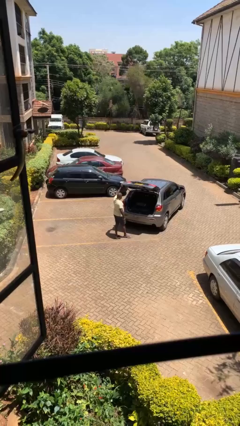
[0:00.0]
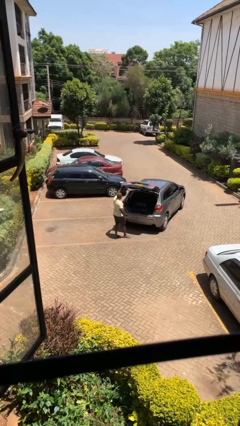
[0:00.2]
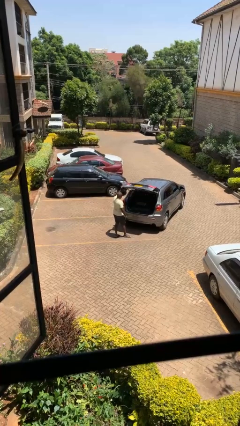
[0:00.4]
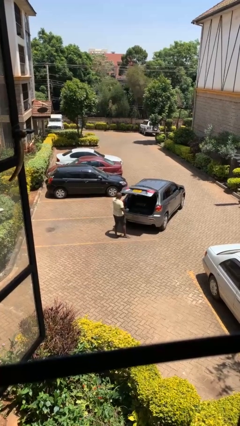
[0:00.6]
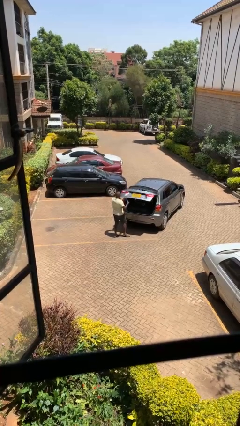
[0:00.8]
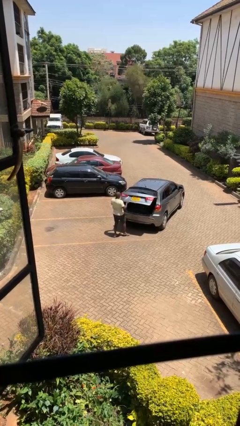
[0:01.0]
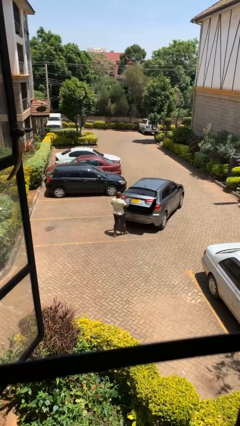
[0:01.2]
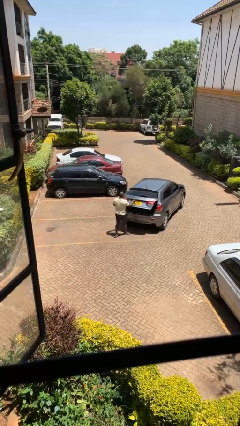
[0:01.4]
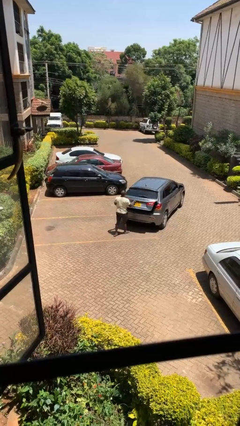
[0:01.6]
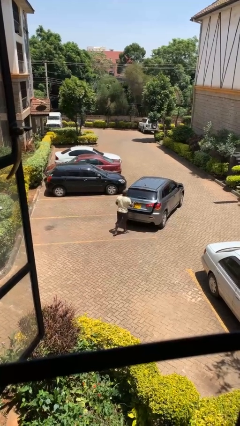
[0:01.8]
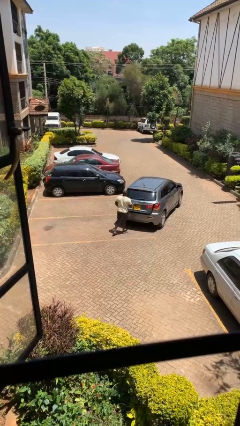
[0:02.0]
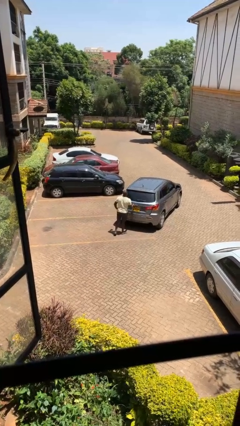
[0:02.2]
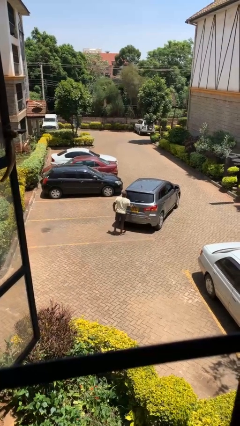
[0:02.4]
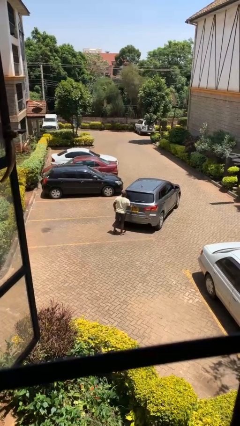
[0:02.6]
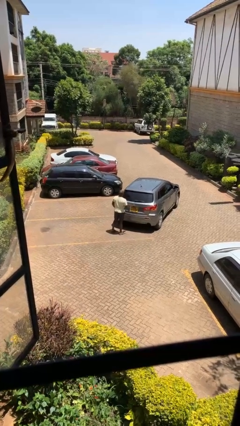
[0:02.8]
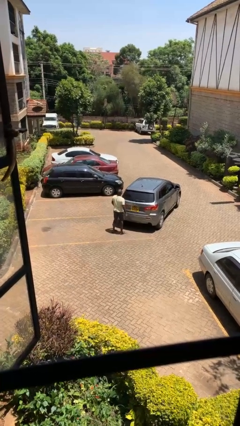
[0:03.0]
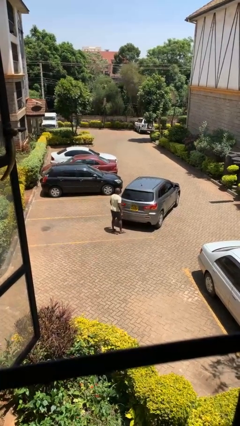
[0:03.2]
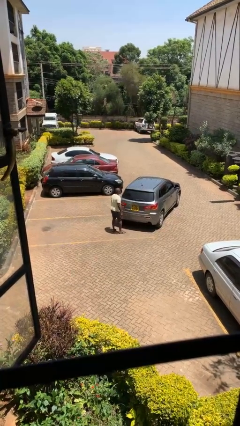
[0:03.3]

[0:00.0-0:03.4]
person closes car trunk

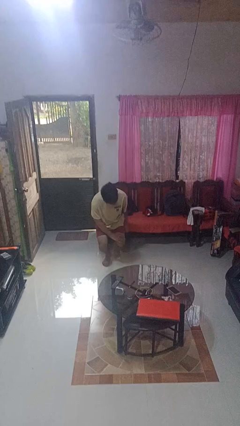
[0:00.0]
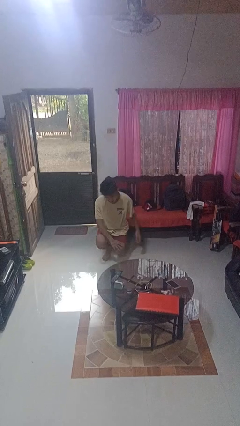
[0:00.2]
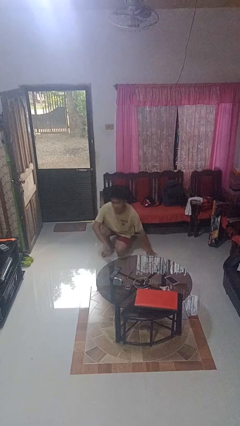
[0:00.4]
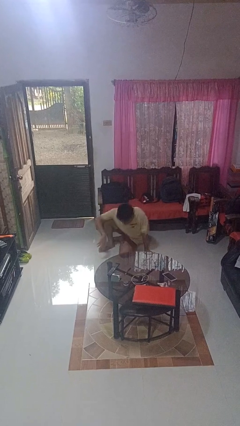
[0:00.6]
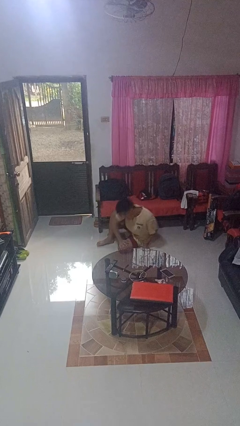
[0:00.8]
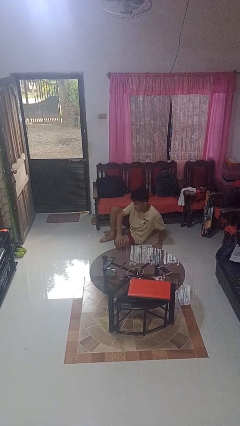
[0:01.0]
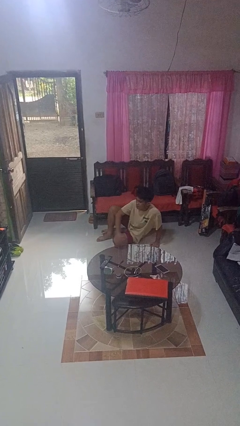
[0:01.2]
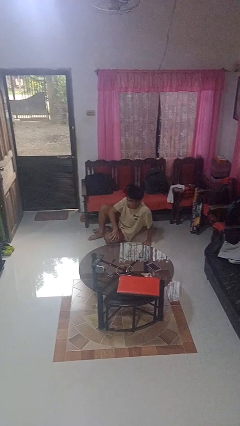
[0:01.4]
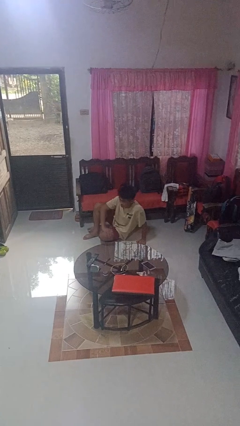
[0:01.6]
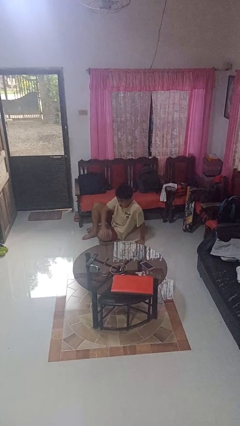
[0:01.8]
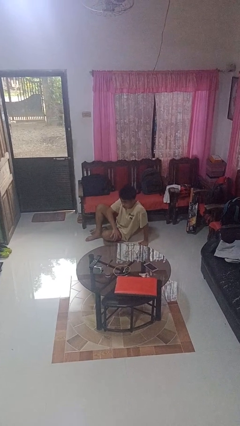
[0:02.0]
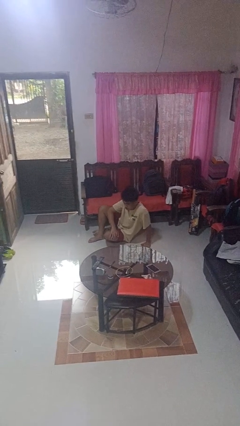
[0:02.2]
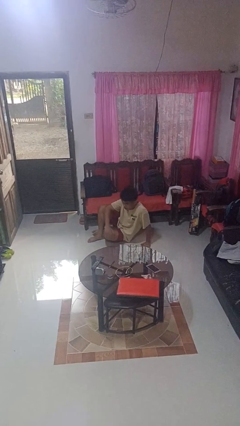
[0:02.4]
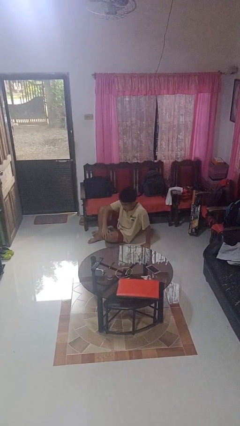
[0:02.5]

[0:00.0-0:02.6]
person lies down on floor

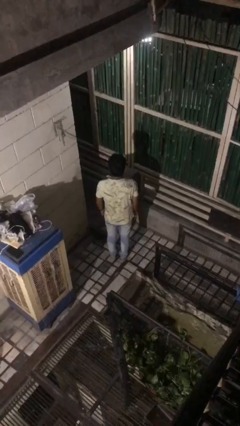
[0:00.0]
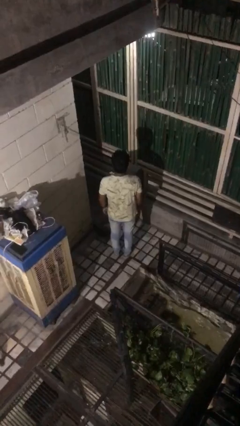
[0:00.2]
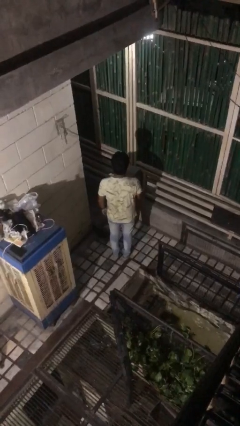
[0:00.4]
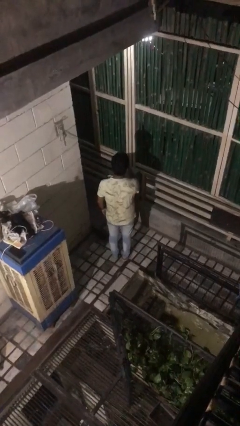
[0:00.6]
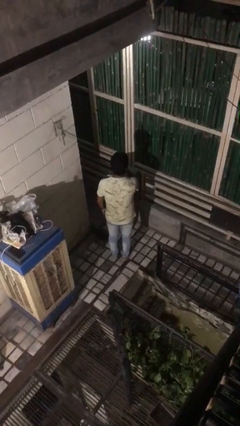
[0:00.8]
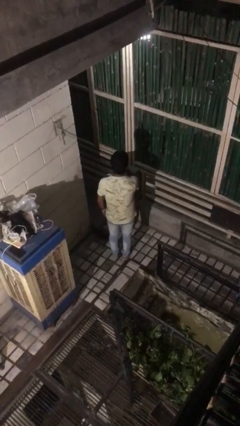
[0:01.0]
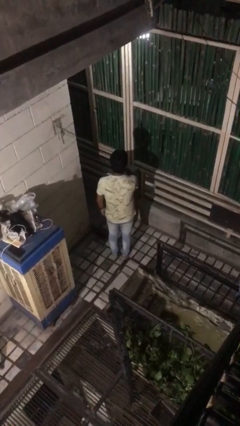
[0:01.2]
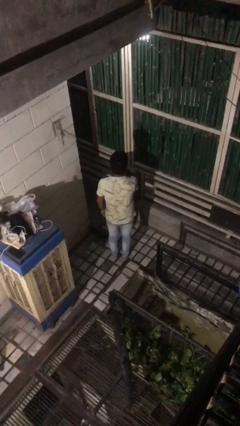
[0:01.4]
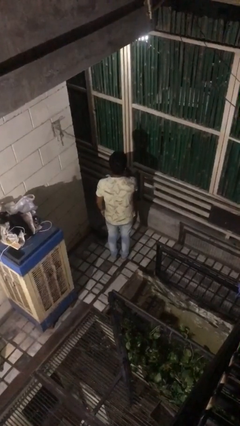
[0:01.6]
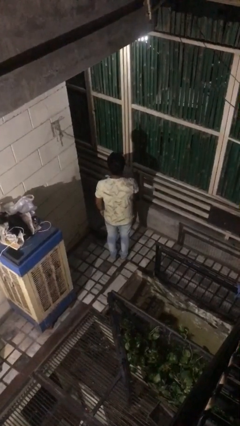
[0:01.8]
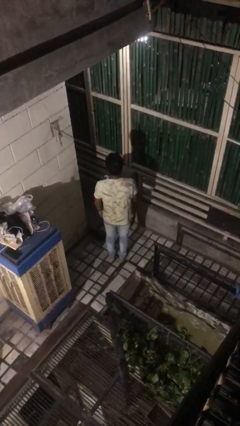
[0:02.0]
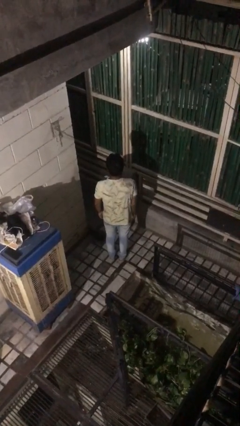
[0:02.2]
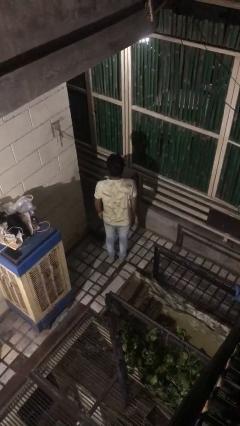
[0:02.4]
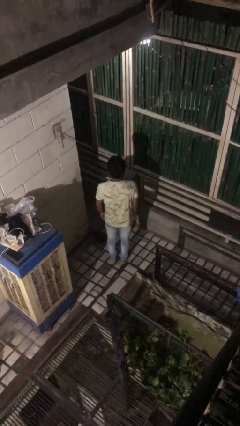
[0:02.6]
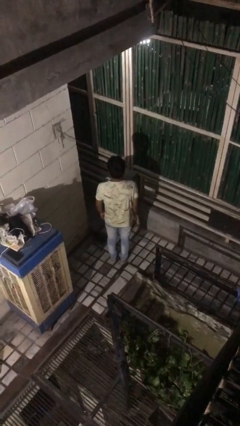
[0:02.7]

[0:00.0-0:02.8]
person gestures be quiet

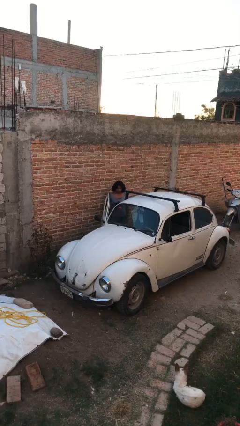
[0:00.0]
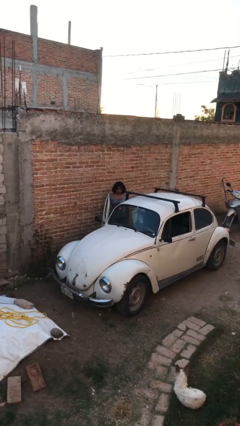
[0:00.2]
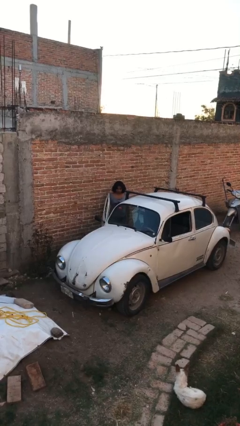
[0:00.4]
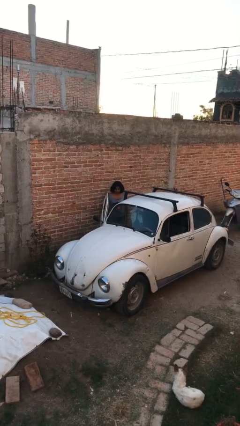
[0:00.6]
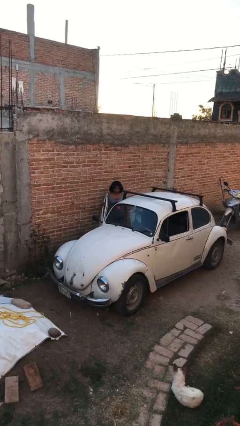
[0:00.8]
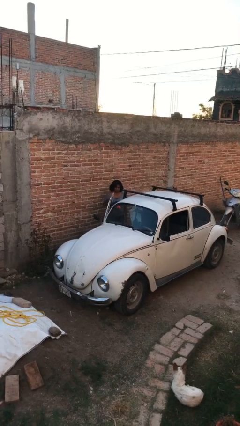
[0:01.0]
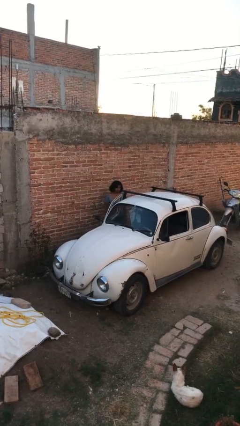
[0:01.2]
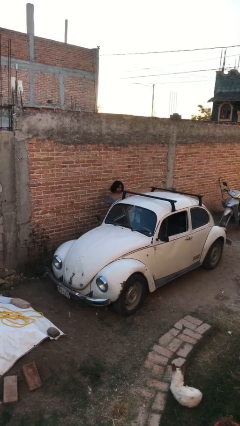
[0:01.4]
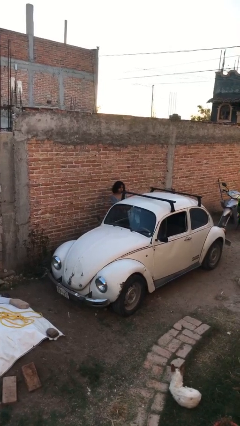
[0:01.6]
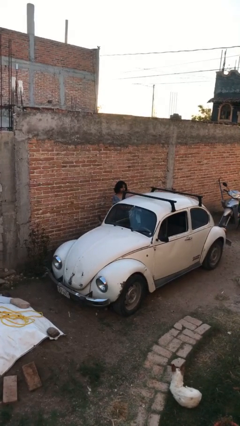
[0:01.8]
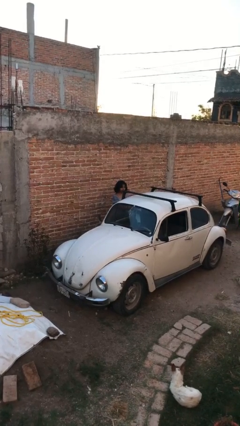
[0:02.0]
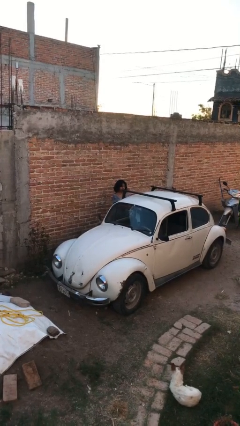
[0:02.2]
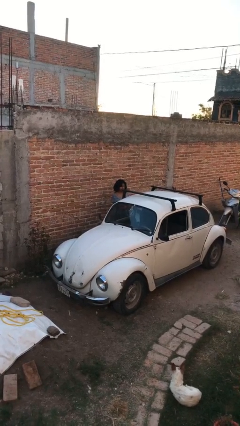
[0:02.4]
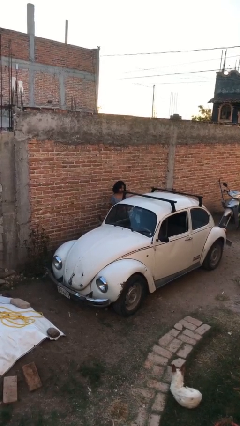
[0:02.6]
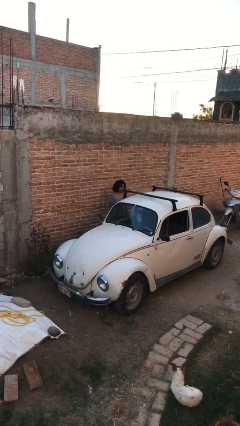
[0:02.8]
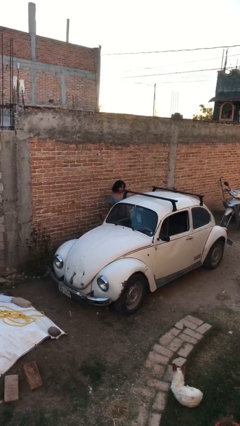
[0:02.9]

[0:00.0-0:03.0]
person closes car door

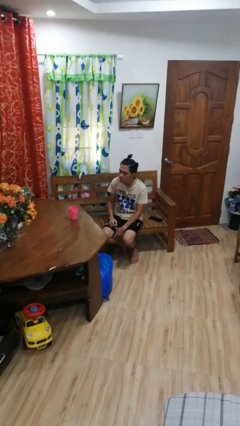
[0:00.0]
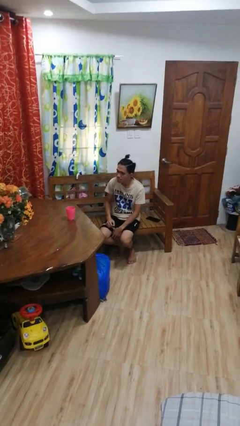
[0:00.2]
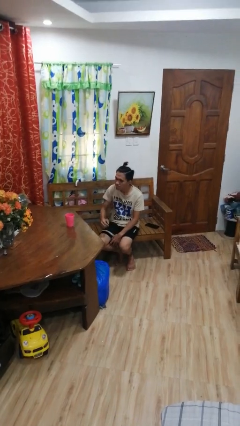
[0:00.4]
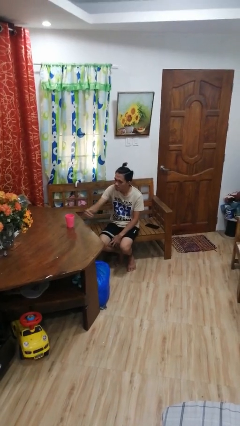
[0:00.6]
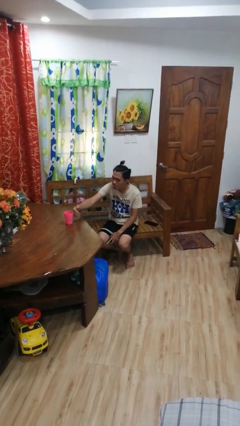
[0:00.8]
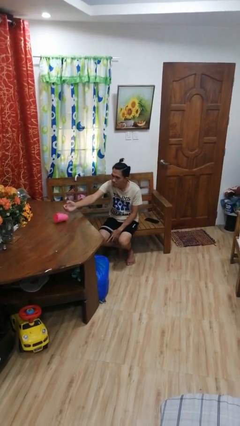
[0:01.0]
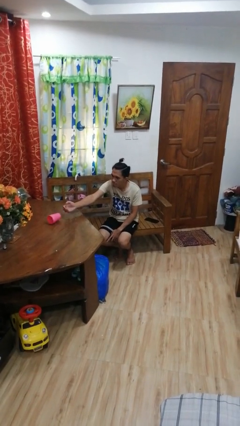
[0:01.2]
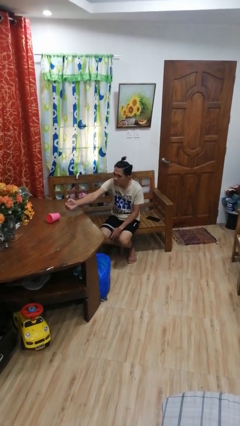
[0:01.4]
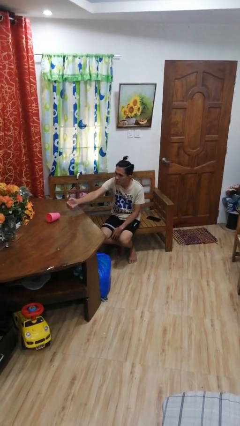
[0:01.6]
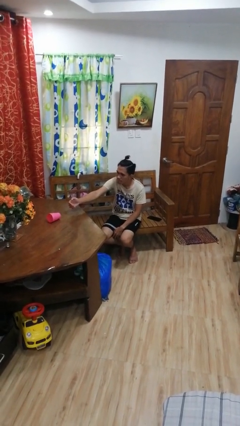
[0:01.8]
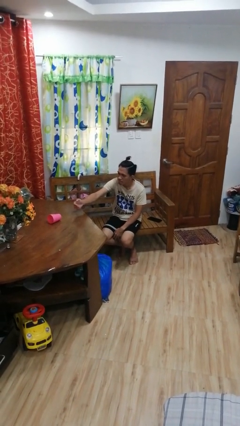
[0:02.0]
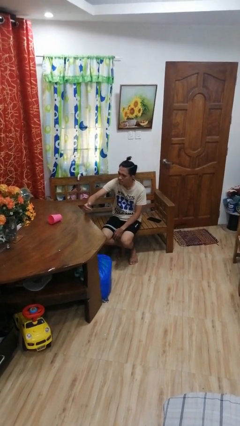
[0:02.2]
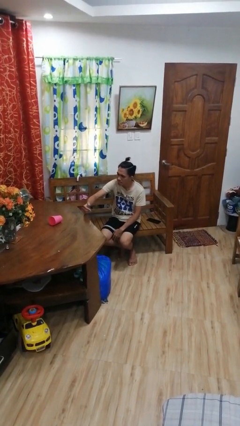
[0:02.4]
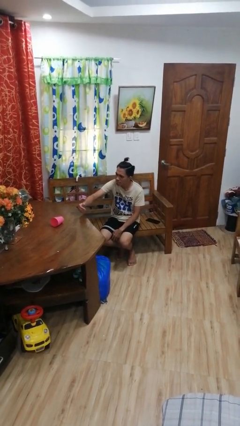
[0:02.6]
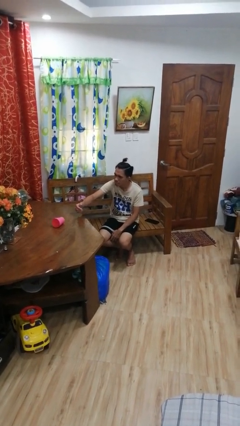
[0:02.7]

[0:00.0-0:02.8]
person knocks over glass

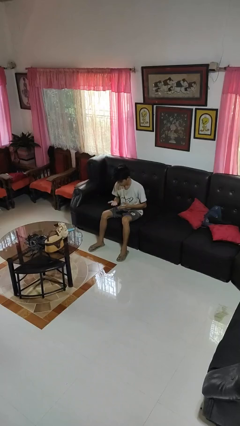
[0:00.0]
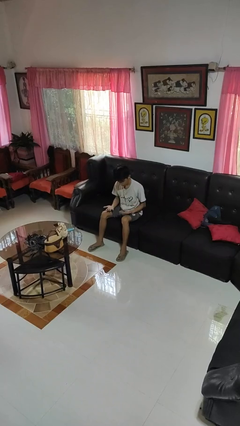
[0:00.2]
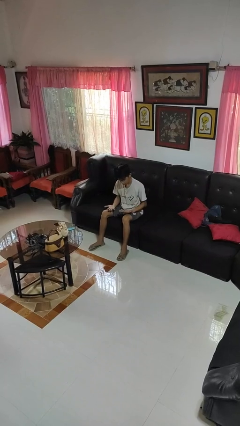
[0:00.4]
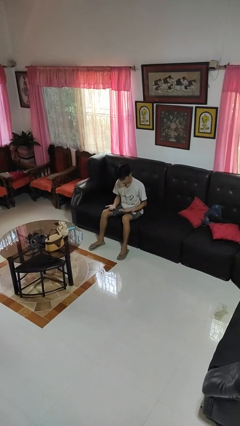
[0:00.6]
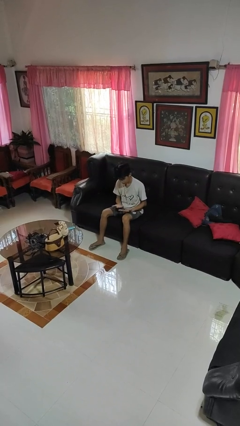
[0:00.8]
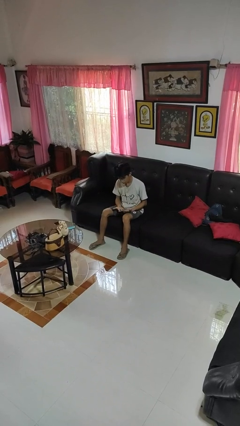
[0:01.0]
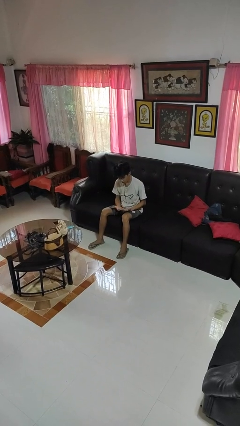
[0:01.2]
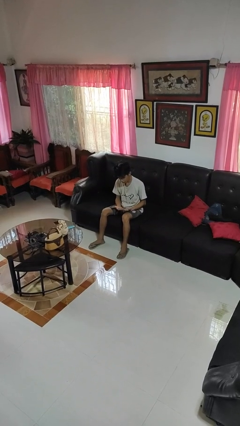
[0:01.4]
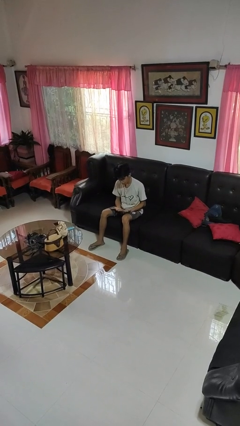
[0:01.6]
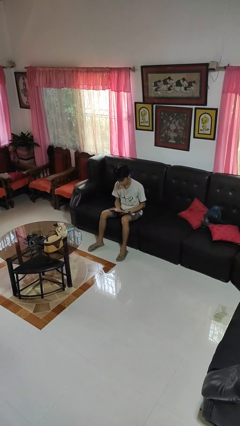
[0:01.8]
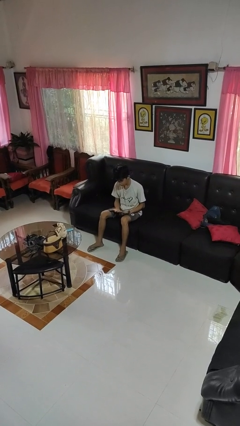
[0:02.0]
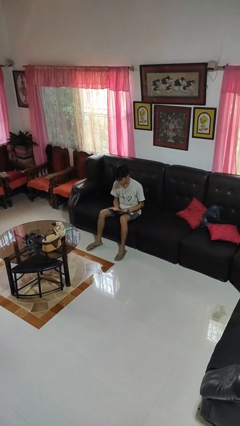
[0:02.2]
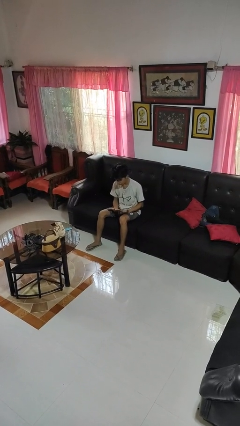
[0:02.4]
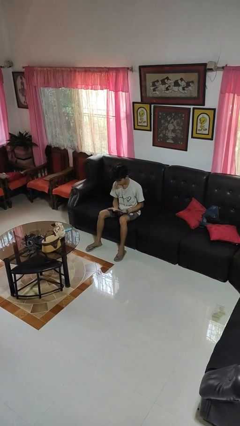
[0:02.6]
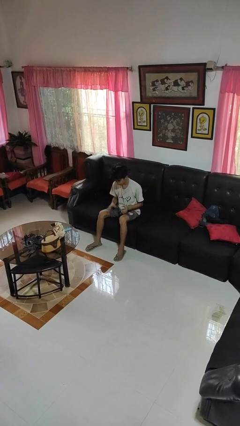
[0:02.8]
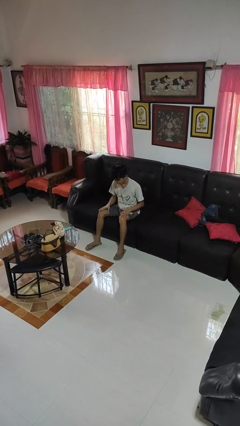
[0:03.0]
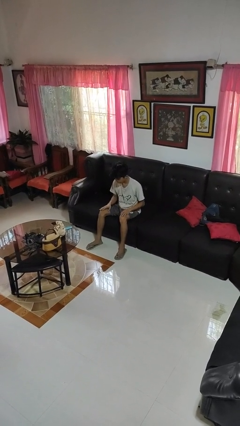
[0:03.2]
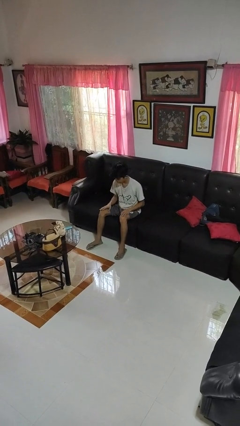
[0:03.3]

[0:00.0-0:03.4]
person looks at hands in lap
